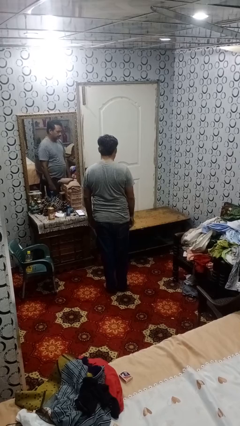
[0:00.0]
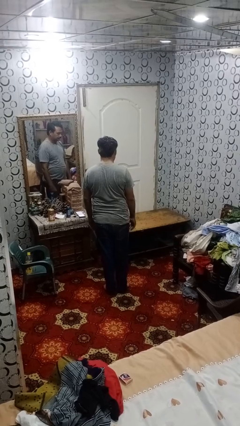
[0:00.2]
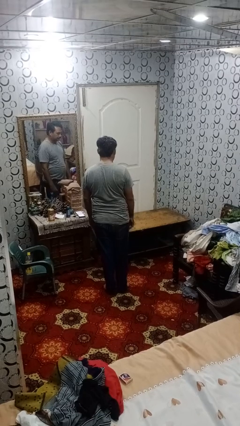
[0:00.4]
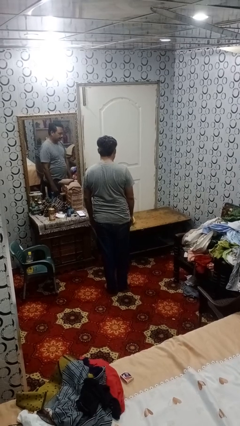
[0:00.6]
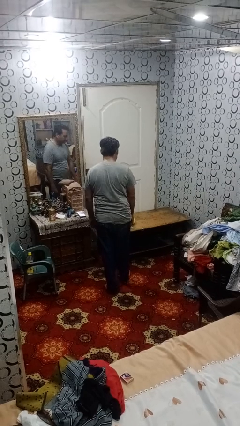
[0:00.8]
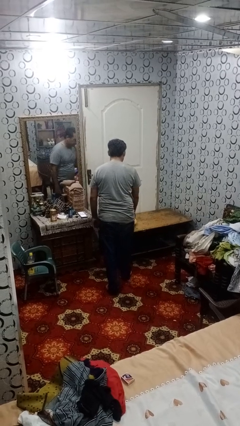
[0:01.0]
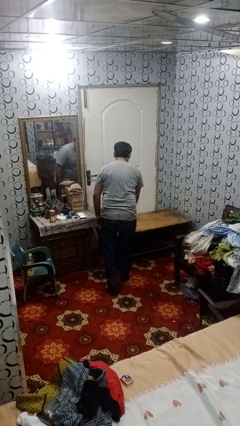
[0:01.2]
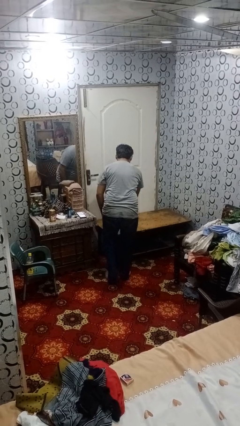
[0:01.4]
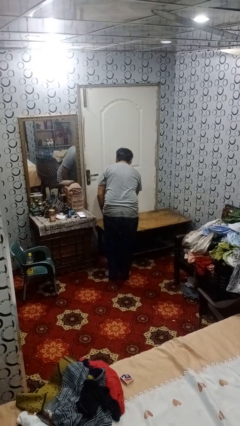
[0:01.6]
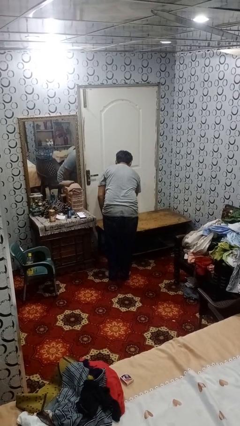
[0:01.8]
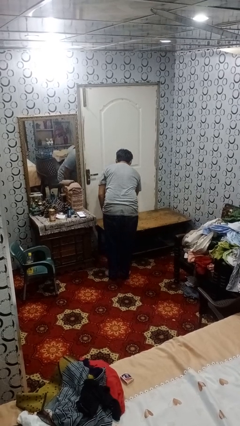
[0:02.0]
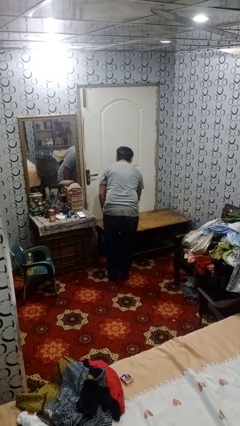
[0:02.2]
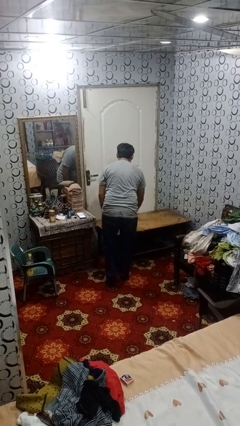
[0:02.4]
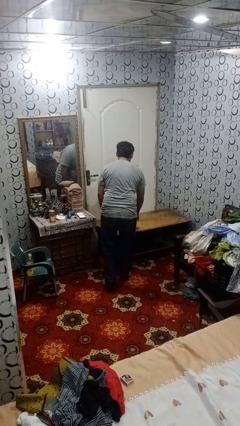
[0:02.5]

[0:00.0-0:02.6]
person picks up object from table

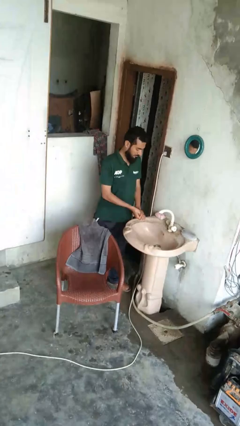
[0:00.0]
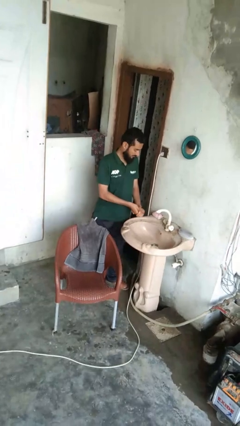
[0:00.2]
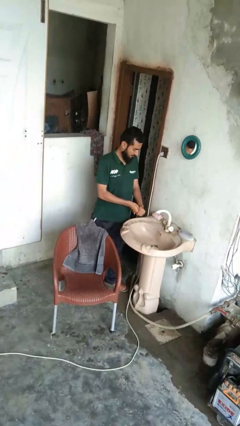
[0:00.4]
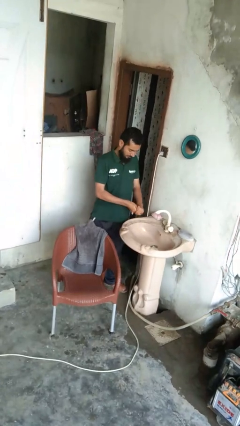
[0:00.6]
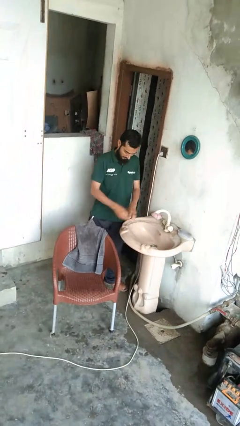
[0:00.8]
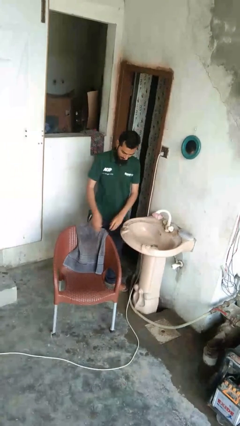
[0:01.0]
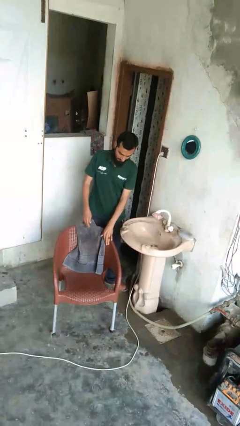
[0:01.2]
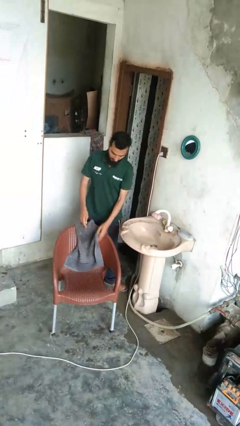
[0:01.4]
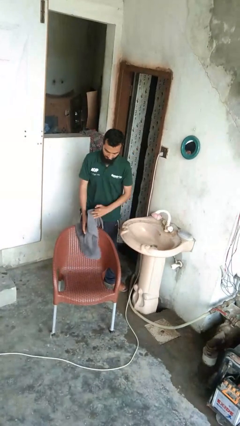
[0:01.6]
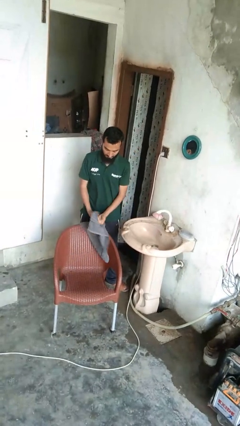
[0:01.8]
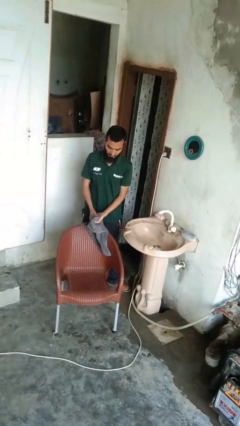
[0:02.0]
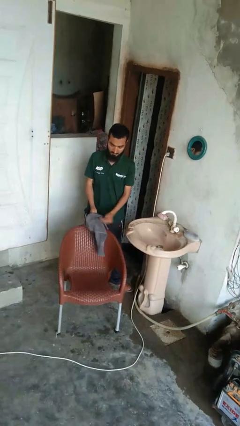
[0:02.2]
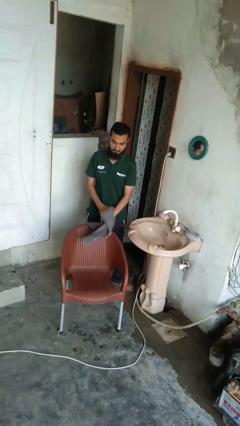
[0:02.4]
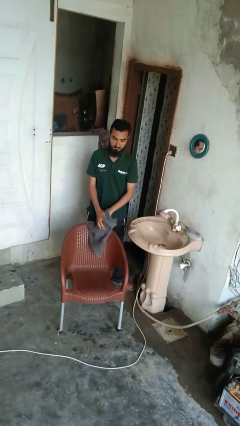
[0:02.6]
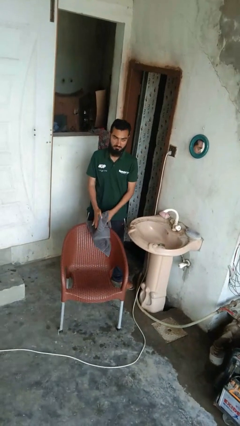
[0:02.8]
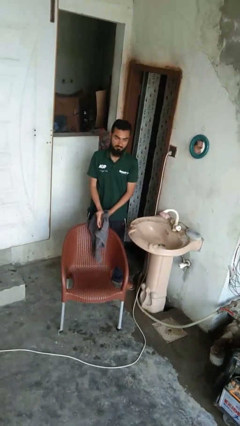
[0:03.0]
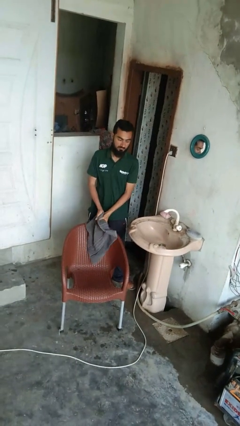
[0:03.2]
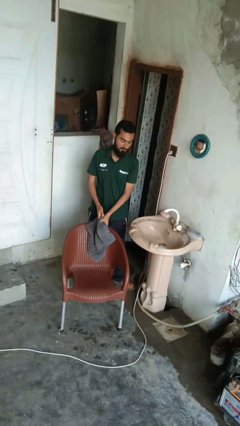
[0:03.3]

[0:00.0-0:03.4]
person dries hands with towel

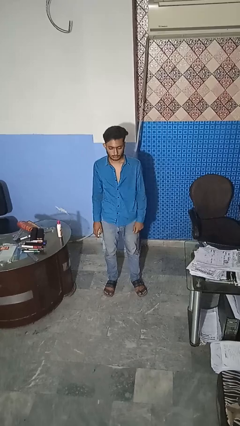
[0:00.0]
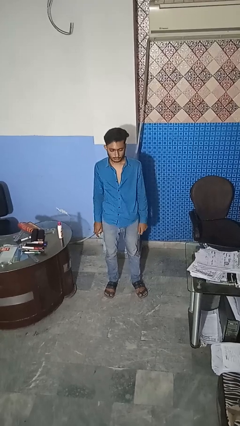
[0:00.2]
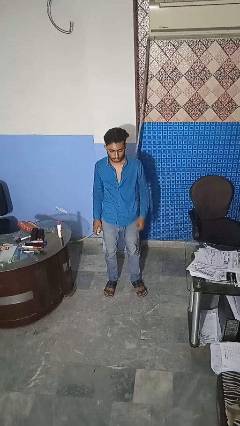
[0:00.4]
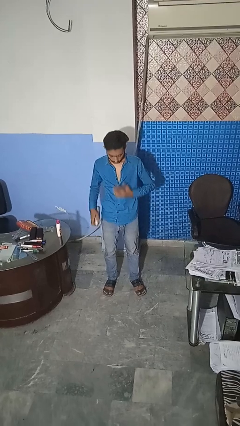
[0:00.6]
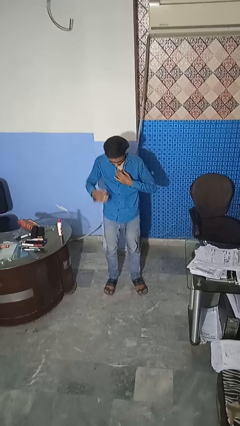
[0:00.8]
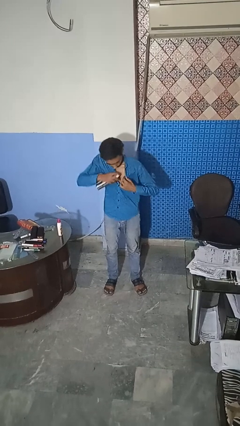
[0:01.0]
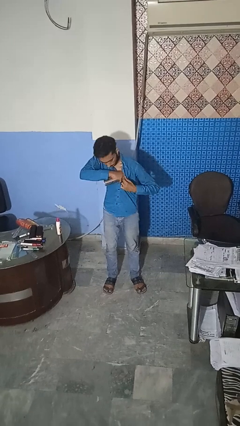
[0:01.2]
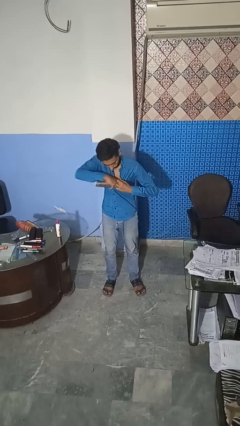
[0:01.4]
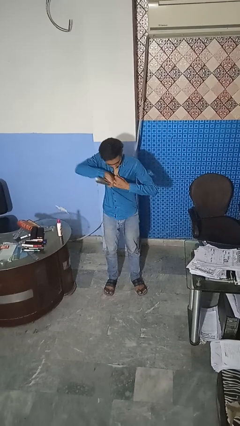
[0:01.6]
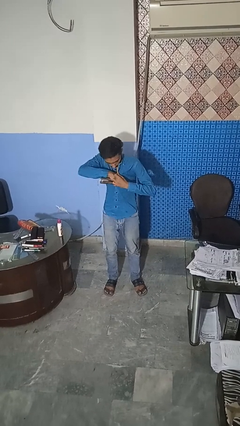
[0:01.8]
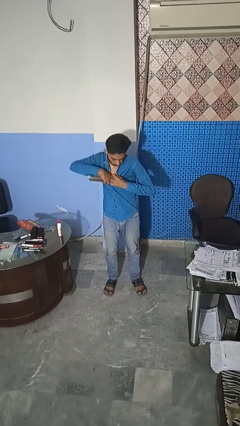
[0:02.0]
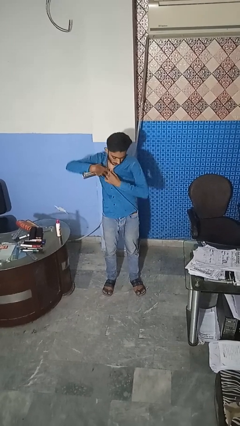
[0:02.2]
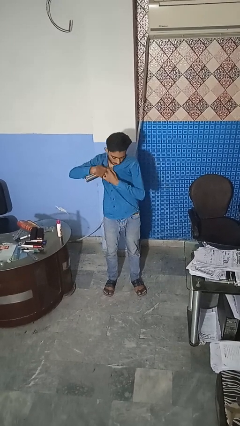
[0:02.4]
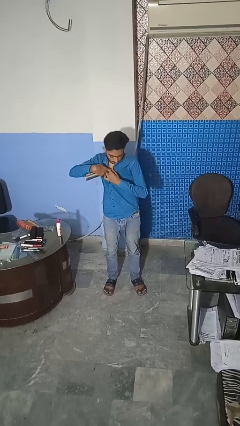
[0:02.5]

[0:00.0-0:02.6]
person applies deodorant

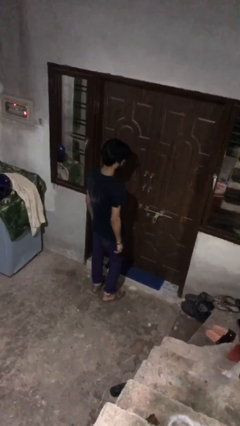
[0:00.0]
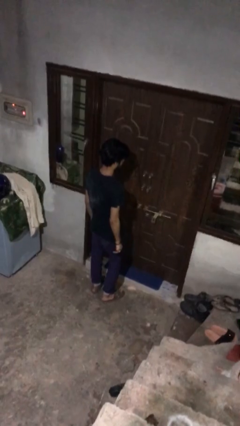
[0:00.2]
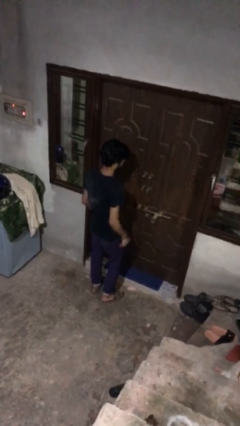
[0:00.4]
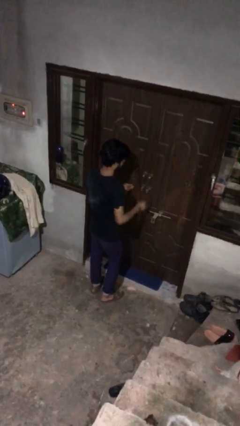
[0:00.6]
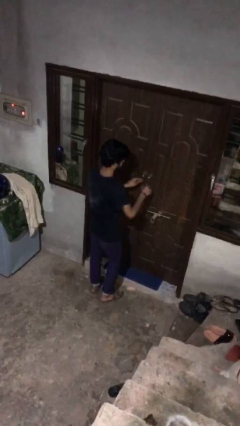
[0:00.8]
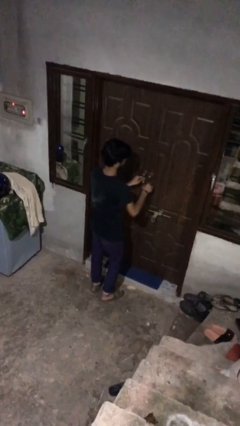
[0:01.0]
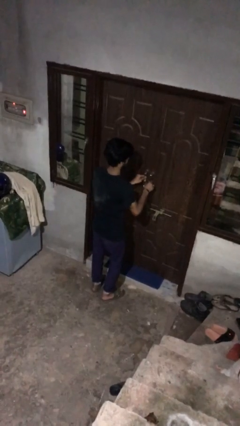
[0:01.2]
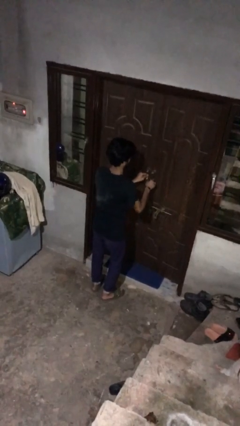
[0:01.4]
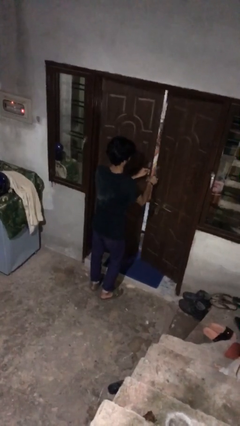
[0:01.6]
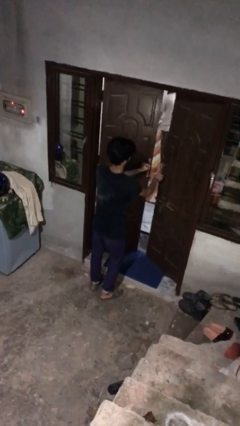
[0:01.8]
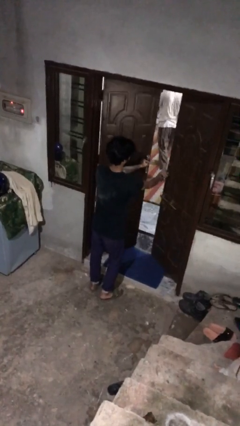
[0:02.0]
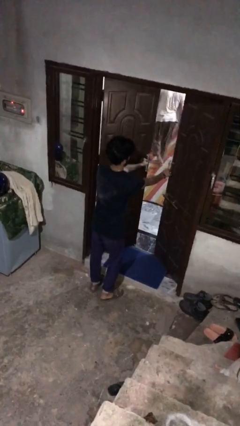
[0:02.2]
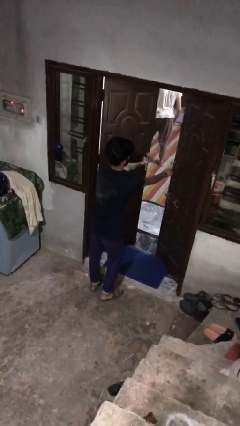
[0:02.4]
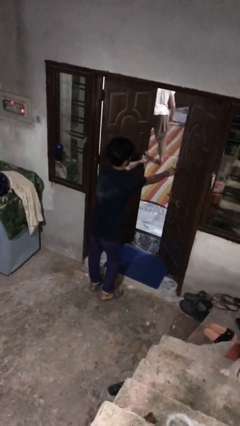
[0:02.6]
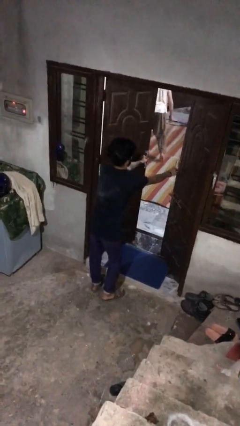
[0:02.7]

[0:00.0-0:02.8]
person opens facility door

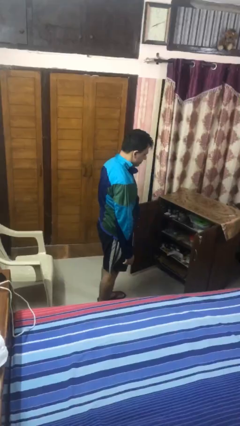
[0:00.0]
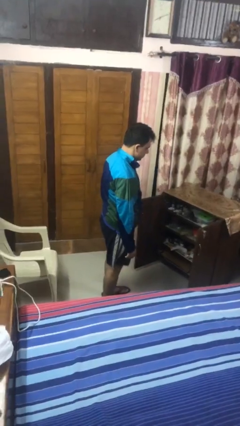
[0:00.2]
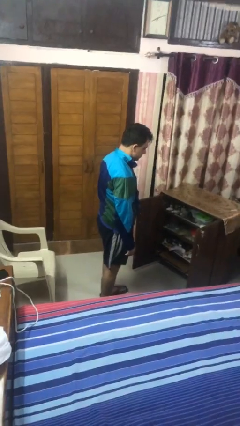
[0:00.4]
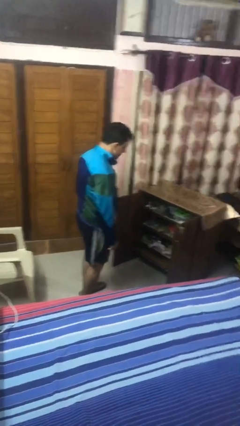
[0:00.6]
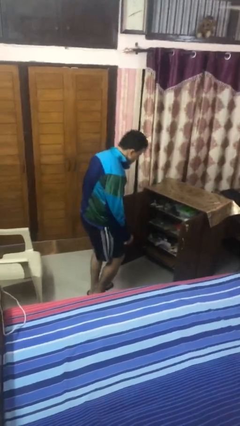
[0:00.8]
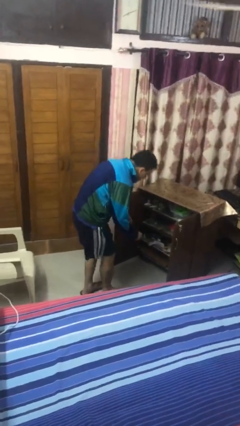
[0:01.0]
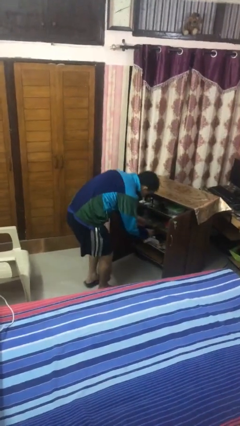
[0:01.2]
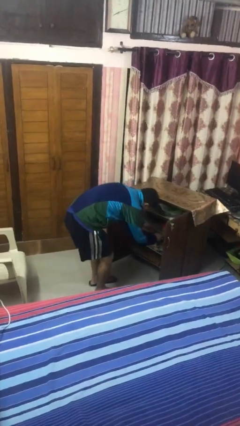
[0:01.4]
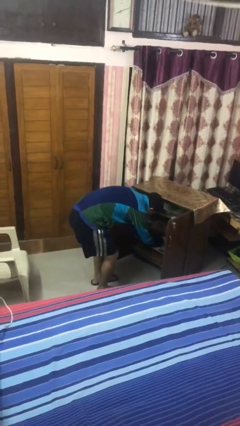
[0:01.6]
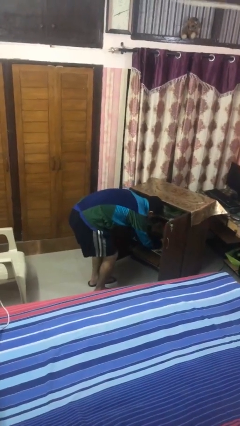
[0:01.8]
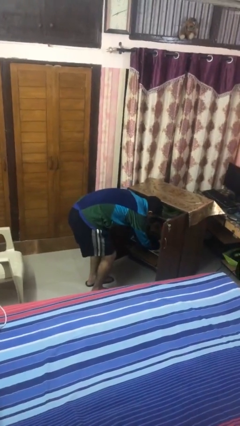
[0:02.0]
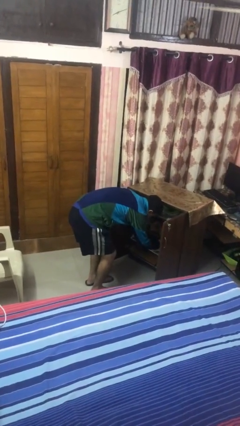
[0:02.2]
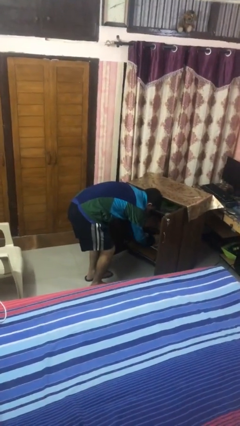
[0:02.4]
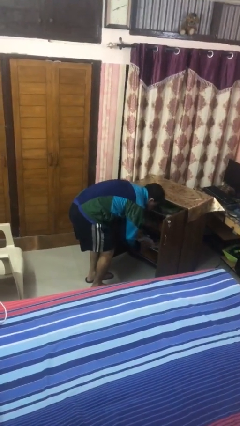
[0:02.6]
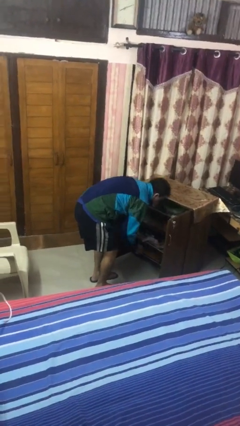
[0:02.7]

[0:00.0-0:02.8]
person searches in cabinet

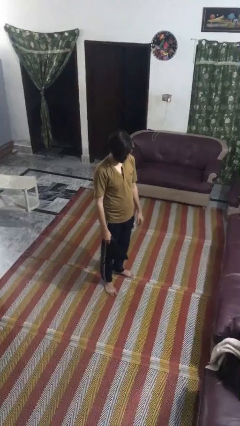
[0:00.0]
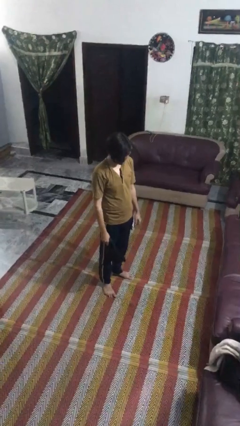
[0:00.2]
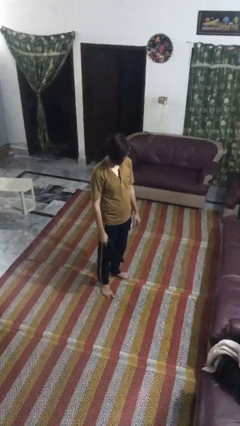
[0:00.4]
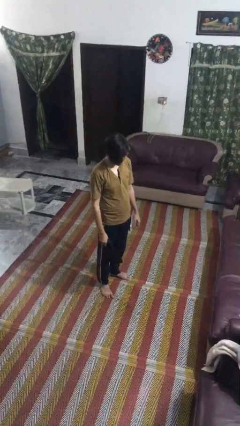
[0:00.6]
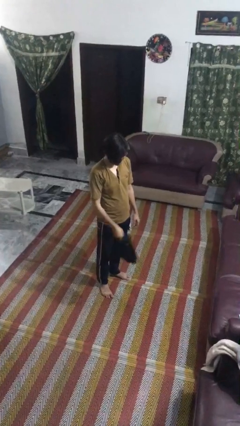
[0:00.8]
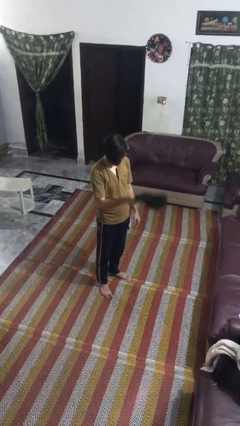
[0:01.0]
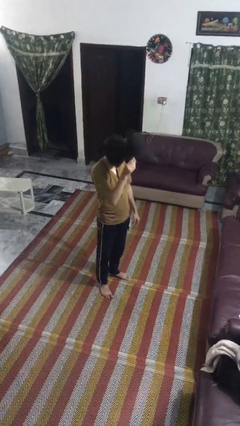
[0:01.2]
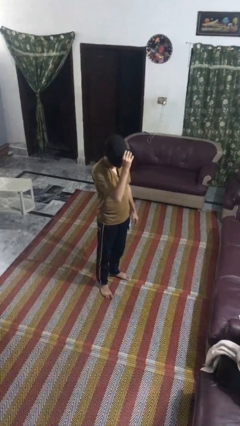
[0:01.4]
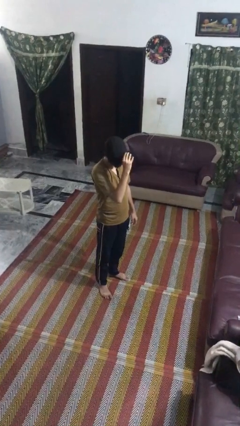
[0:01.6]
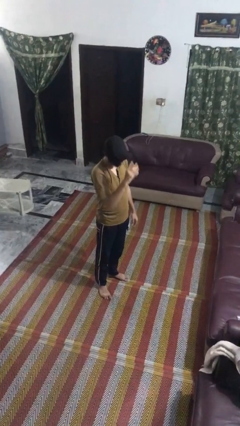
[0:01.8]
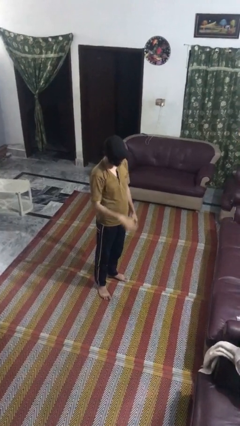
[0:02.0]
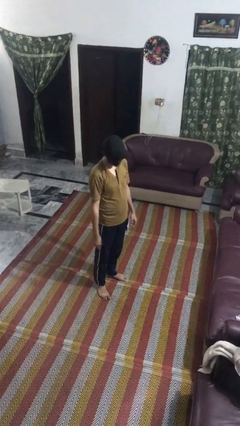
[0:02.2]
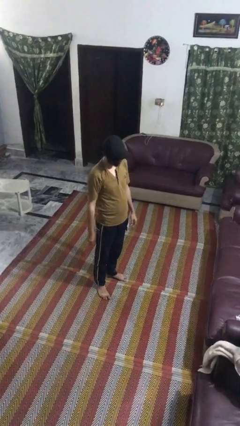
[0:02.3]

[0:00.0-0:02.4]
person puts on hat

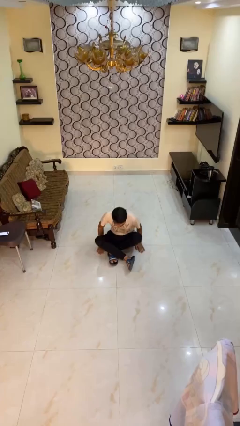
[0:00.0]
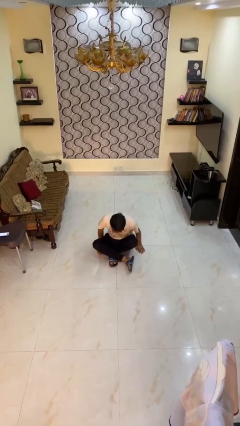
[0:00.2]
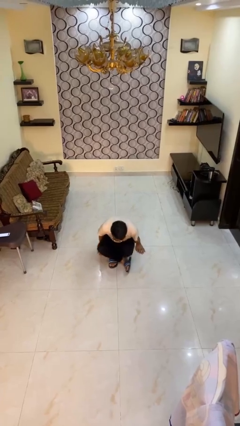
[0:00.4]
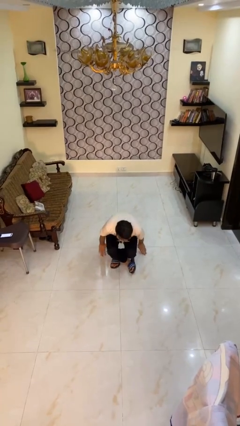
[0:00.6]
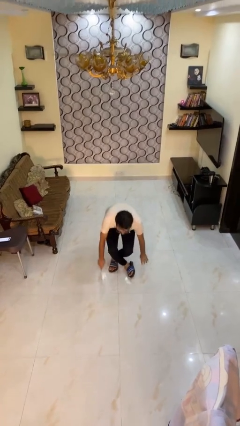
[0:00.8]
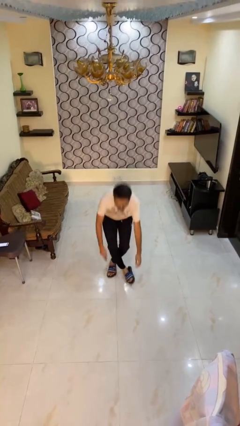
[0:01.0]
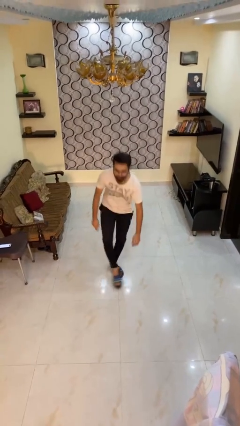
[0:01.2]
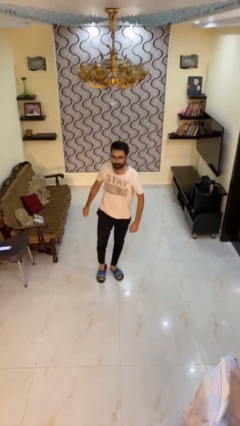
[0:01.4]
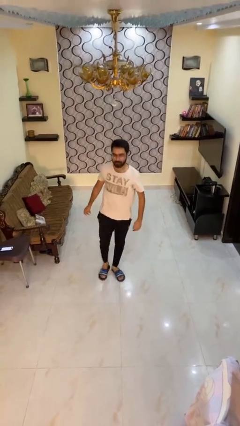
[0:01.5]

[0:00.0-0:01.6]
person stands up from floor
